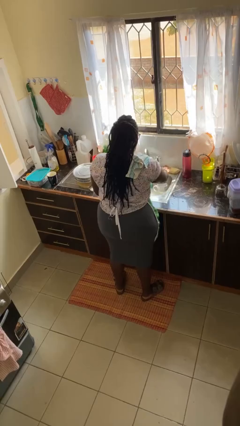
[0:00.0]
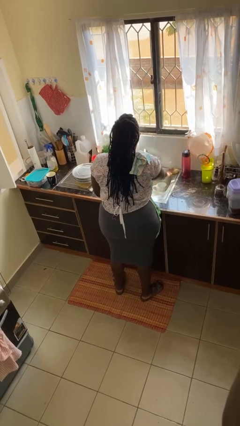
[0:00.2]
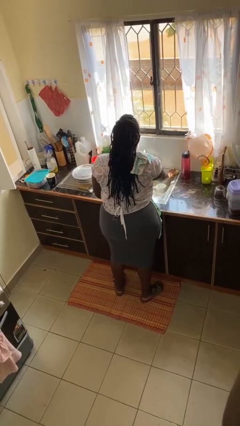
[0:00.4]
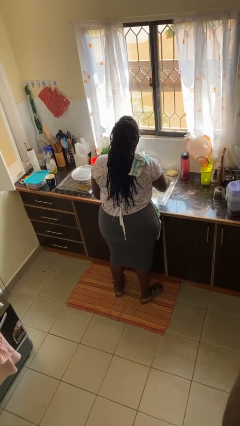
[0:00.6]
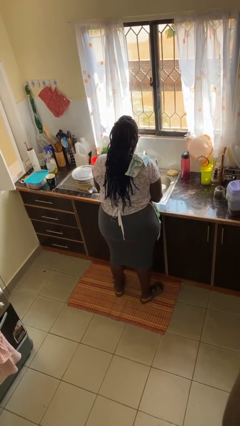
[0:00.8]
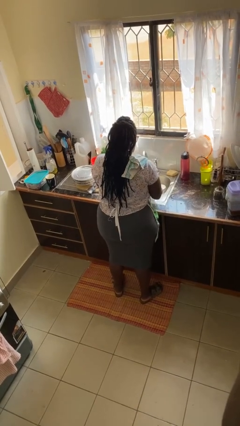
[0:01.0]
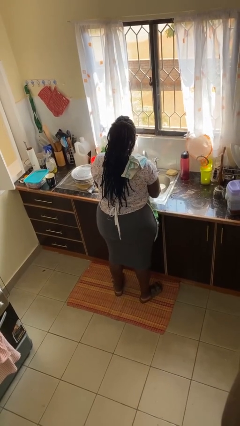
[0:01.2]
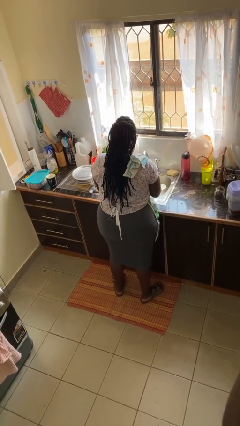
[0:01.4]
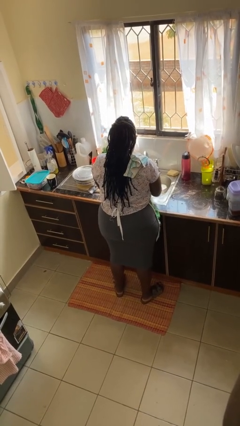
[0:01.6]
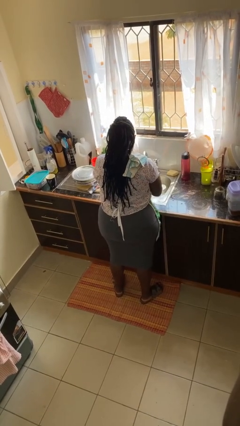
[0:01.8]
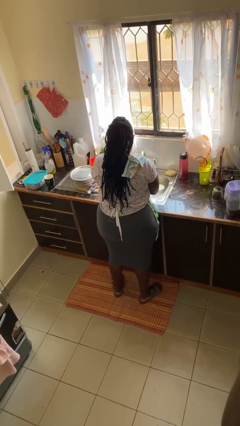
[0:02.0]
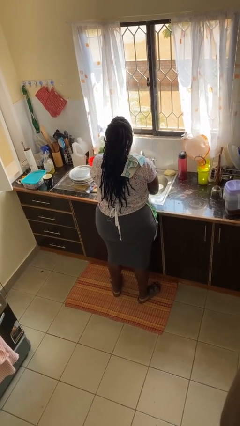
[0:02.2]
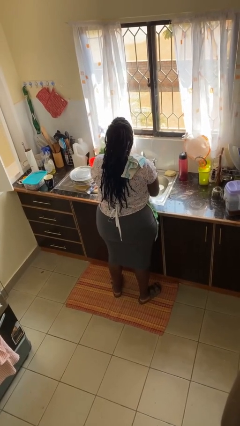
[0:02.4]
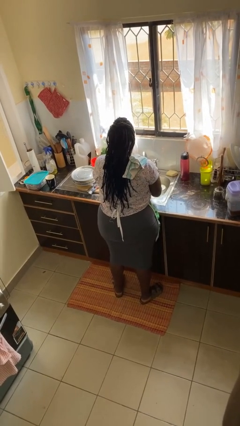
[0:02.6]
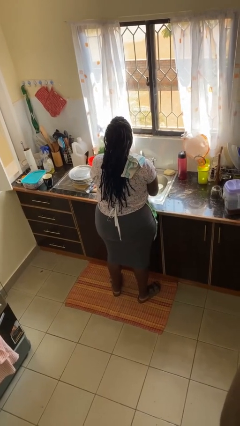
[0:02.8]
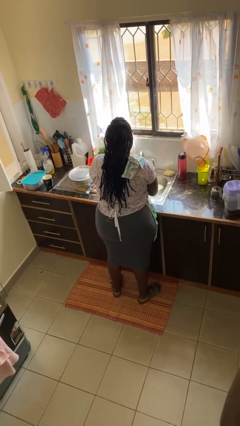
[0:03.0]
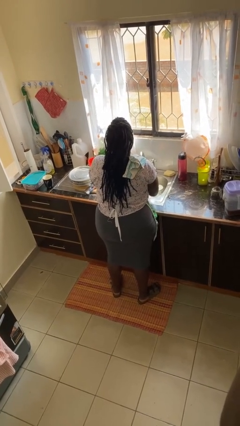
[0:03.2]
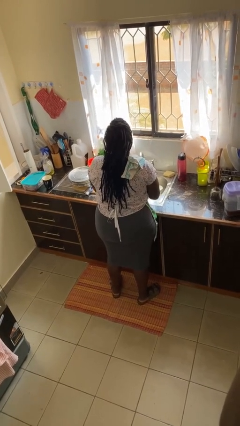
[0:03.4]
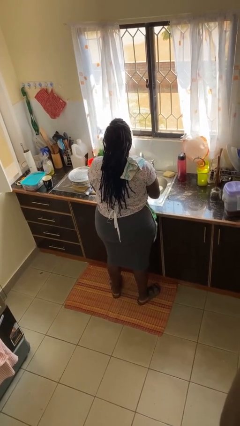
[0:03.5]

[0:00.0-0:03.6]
person washes hands

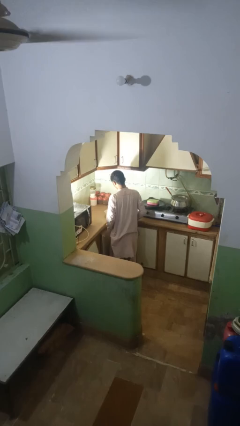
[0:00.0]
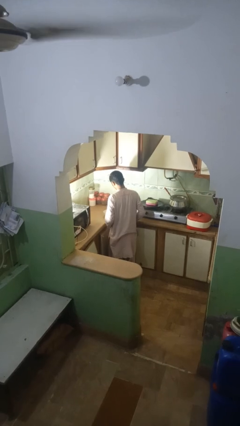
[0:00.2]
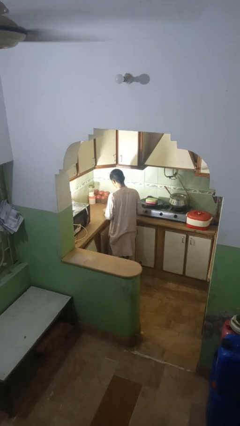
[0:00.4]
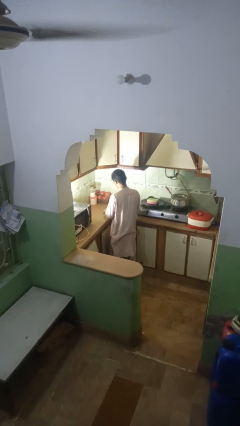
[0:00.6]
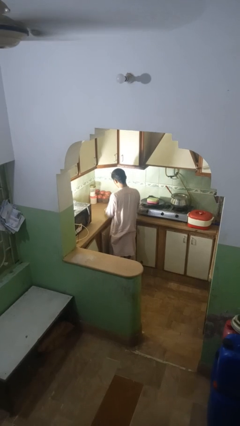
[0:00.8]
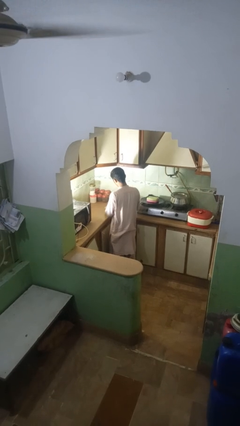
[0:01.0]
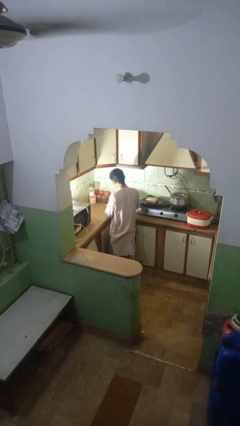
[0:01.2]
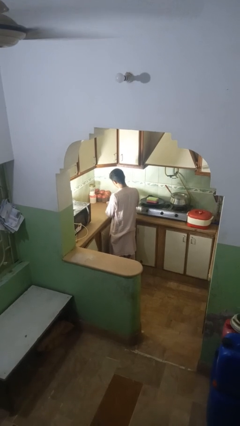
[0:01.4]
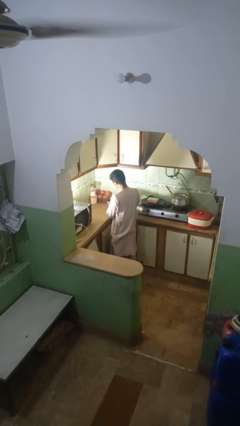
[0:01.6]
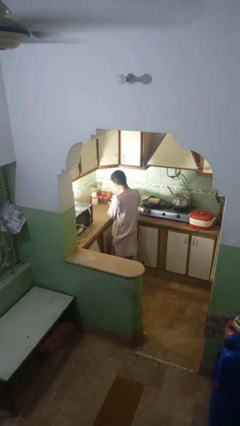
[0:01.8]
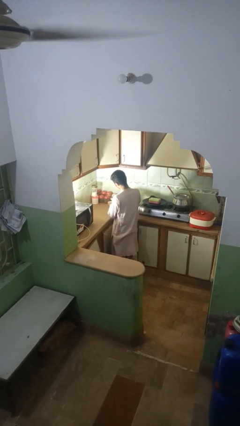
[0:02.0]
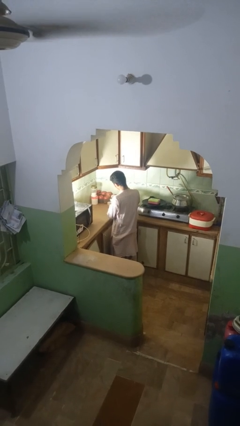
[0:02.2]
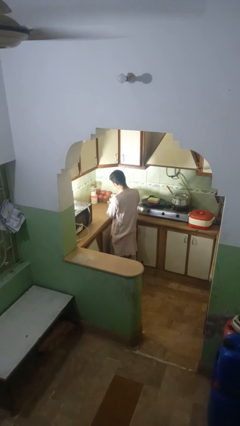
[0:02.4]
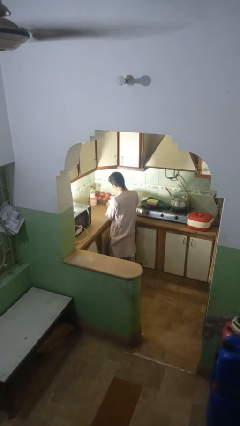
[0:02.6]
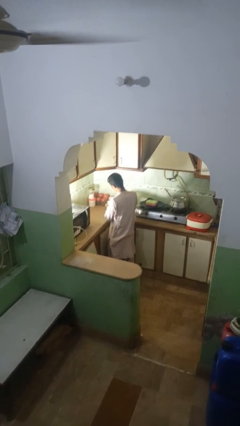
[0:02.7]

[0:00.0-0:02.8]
person pours into bowl

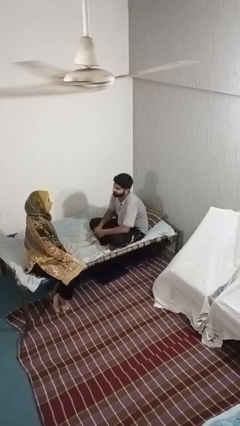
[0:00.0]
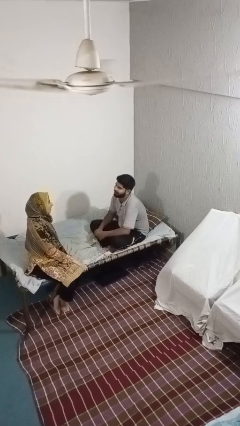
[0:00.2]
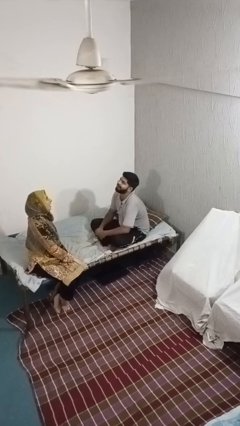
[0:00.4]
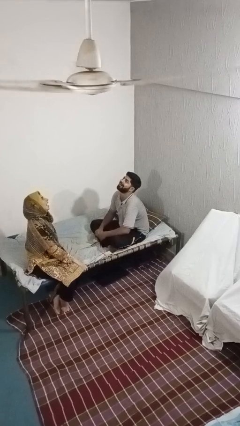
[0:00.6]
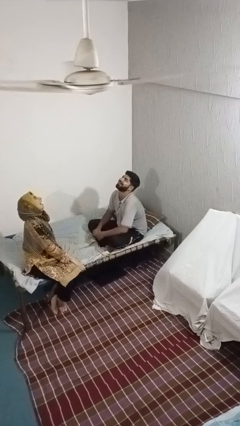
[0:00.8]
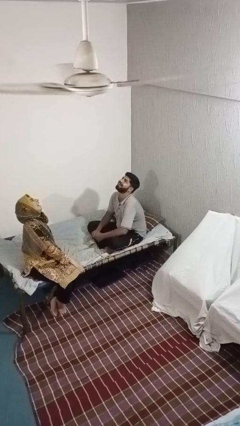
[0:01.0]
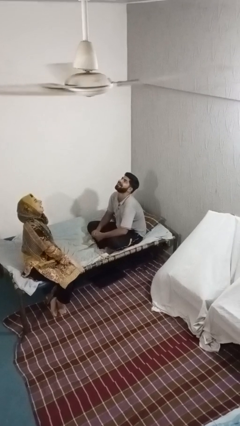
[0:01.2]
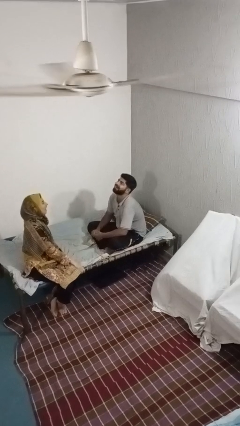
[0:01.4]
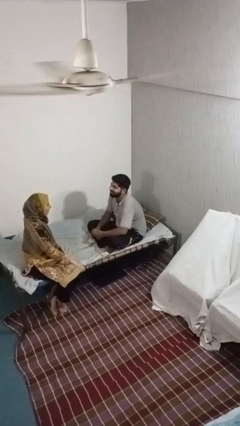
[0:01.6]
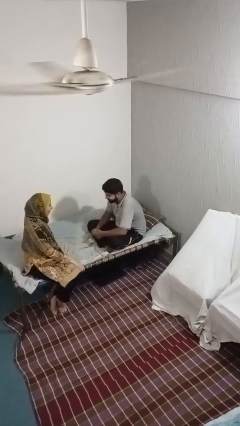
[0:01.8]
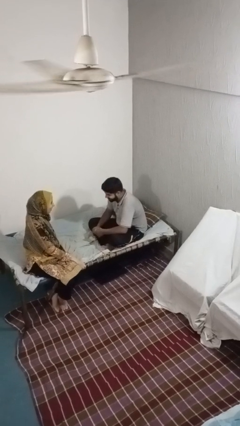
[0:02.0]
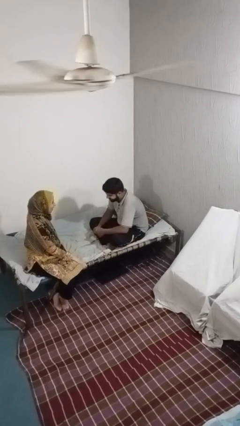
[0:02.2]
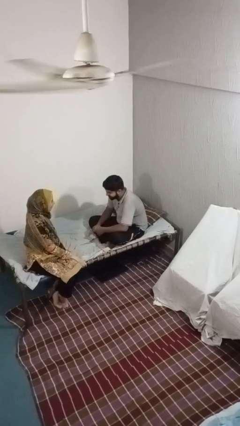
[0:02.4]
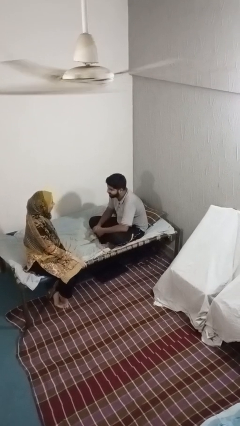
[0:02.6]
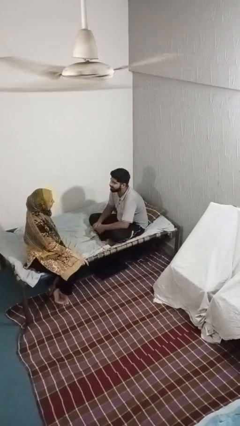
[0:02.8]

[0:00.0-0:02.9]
person laughs with person

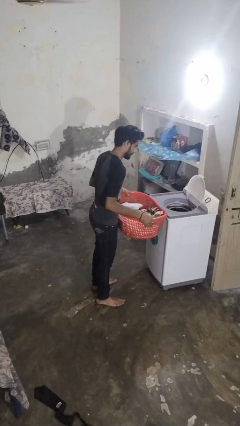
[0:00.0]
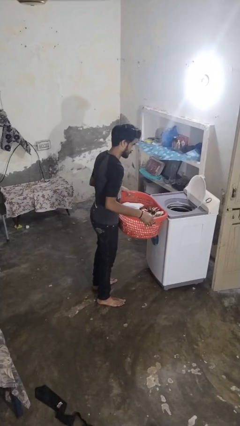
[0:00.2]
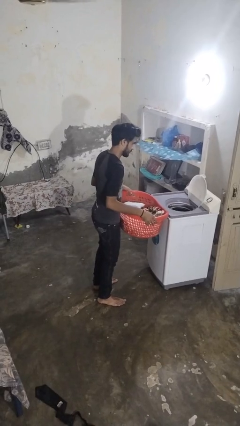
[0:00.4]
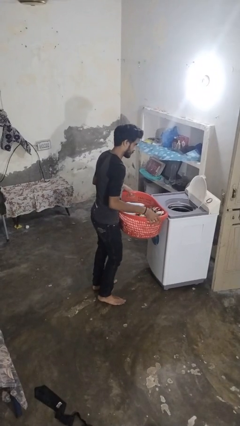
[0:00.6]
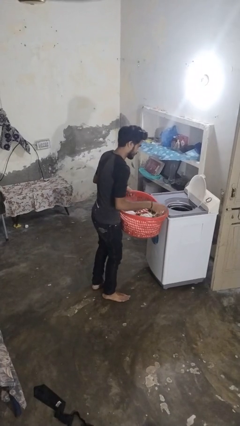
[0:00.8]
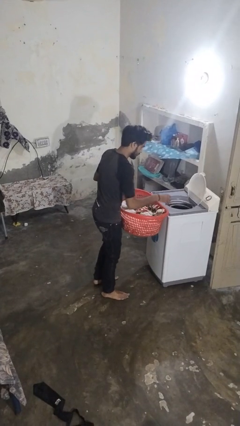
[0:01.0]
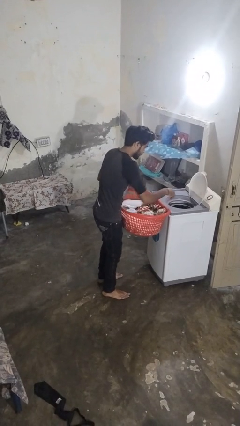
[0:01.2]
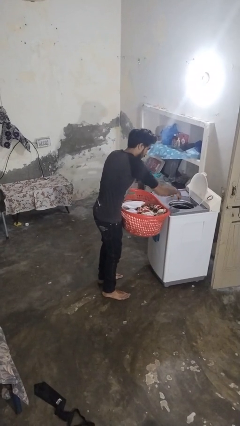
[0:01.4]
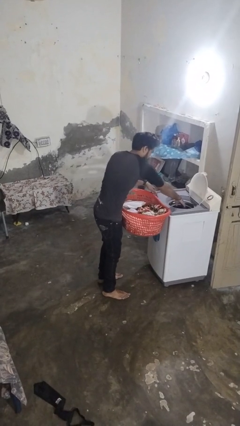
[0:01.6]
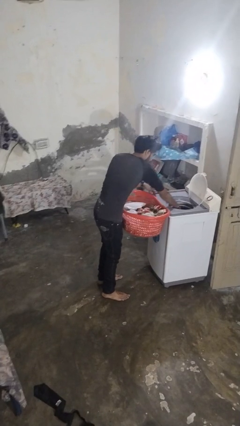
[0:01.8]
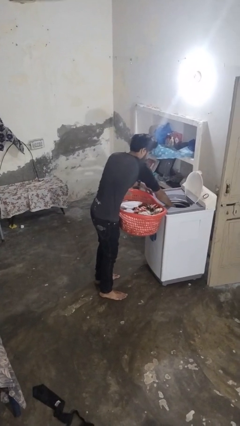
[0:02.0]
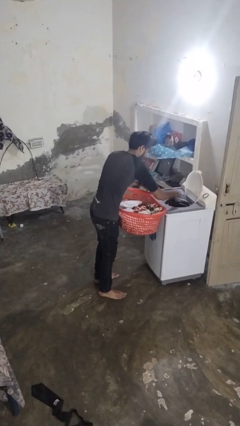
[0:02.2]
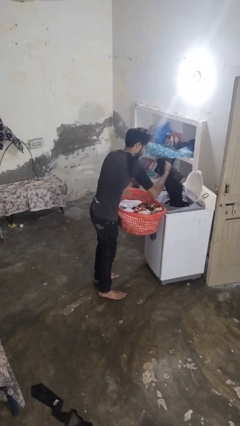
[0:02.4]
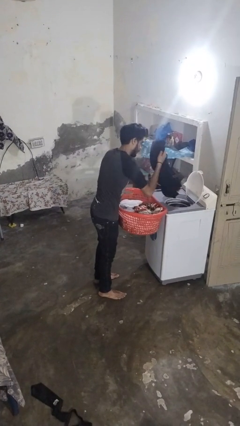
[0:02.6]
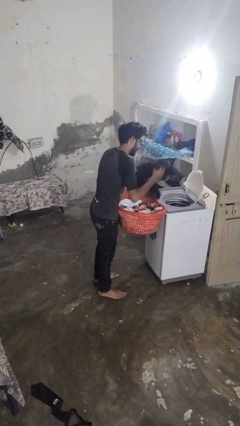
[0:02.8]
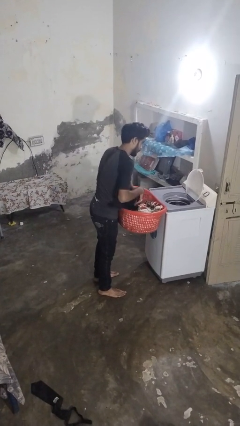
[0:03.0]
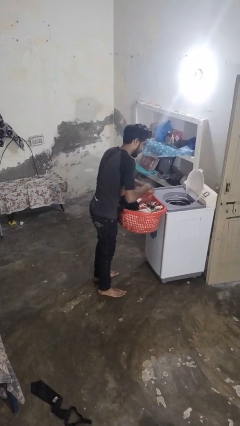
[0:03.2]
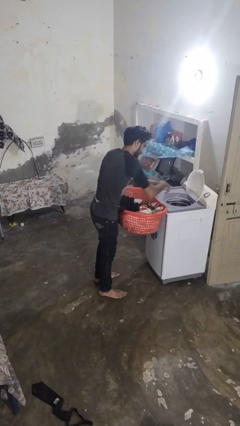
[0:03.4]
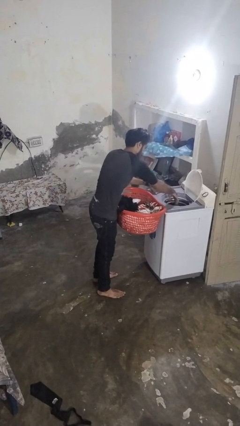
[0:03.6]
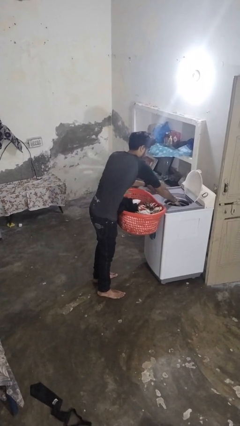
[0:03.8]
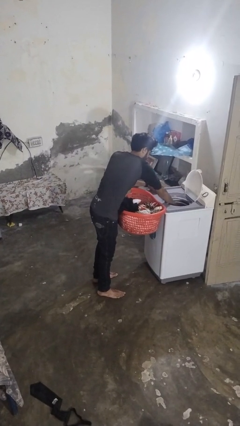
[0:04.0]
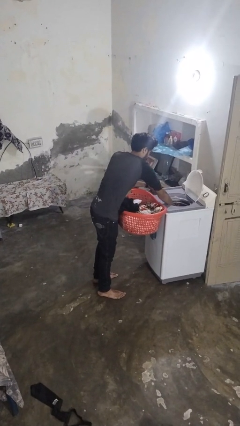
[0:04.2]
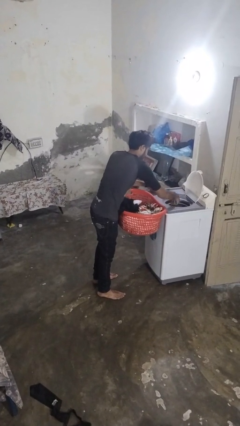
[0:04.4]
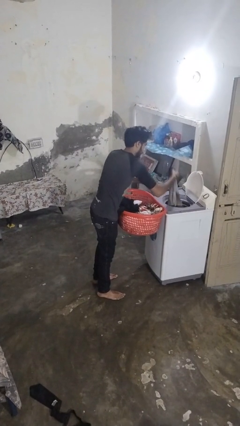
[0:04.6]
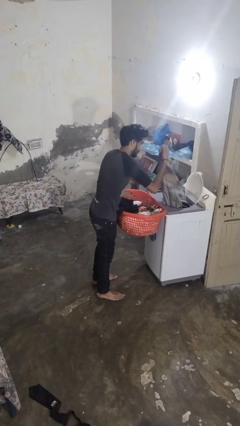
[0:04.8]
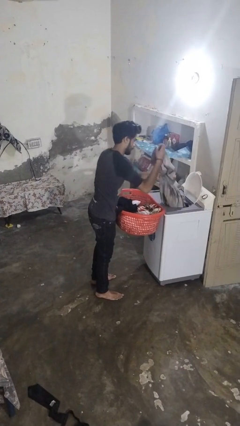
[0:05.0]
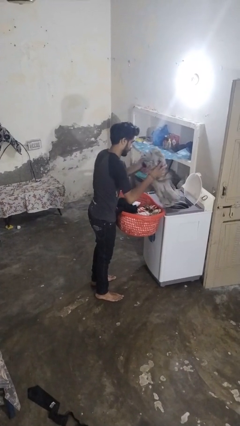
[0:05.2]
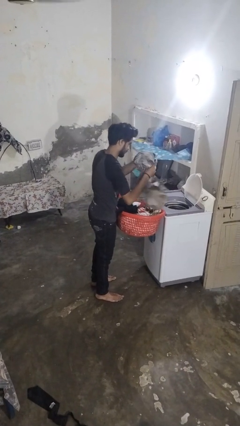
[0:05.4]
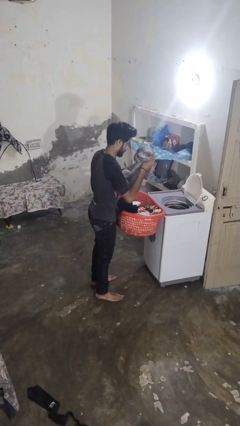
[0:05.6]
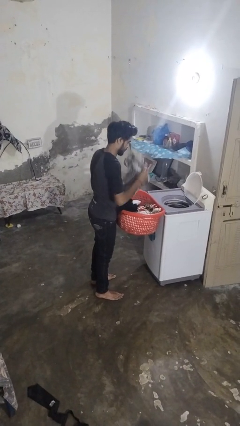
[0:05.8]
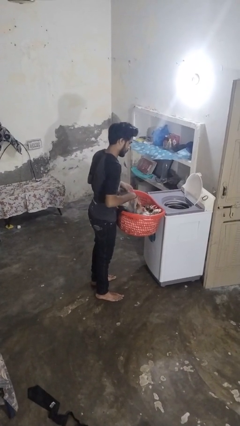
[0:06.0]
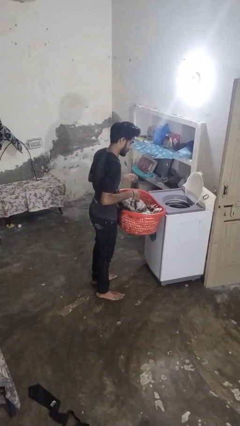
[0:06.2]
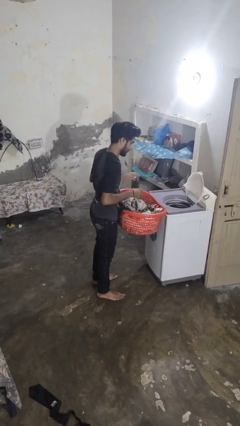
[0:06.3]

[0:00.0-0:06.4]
person unloads dryer

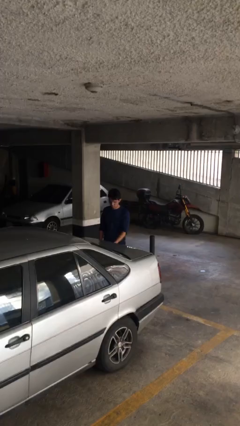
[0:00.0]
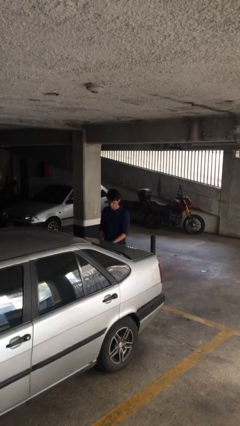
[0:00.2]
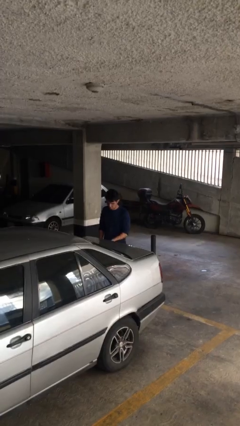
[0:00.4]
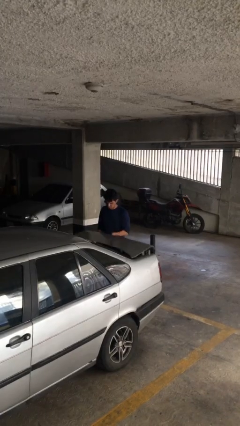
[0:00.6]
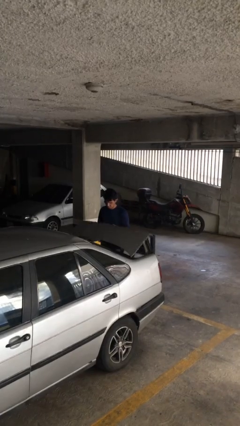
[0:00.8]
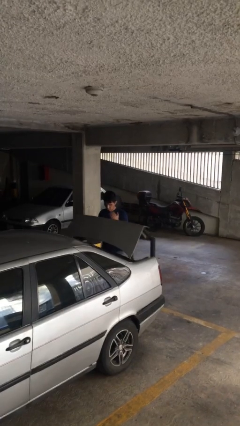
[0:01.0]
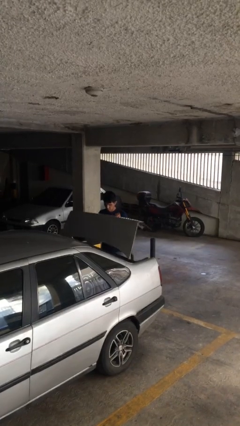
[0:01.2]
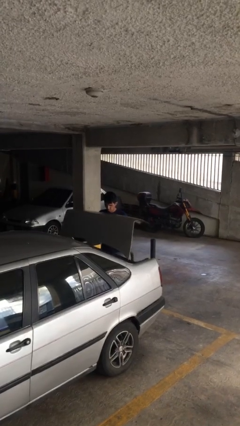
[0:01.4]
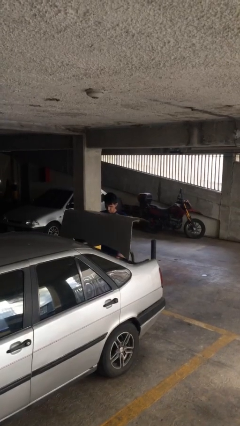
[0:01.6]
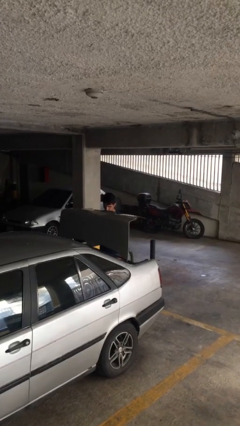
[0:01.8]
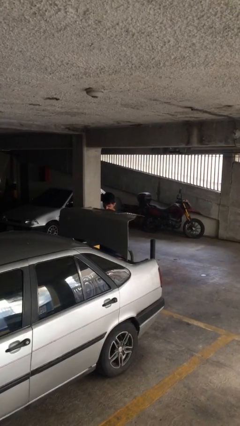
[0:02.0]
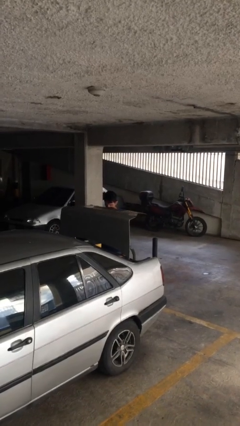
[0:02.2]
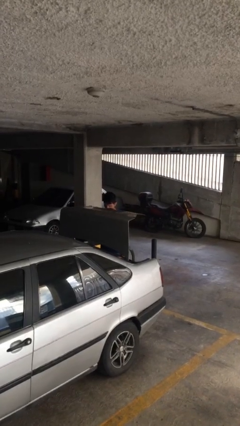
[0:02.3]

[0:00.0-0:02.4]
person opens car trunk
